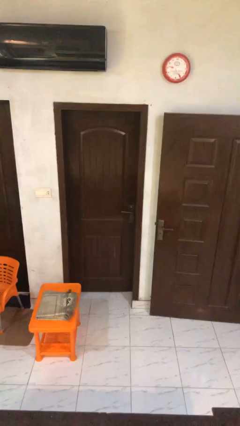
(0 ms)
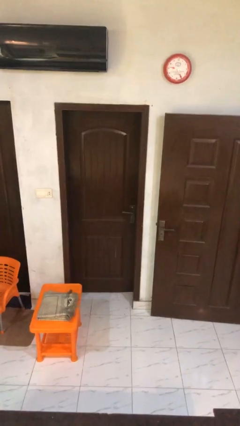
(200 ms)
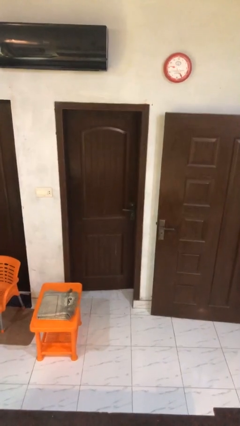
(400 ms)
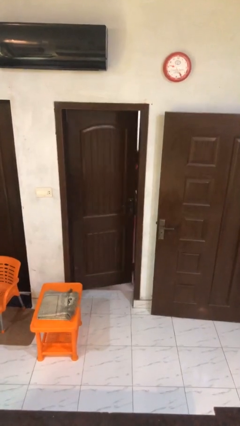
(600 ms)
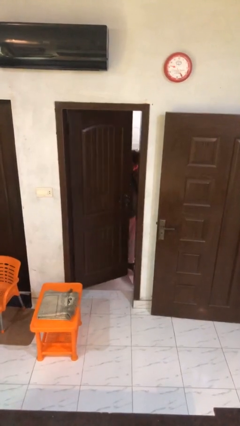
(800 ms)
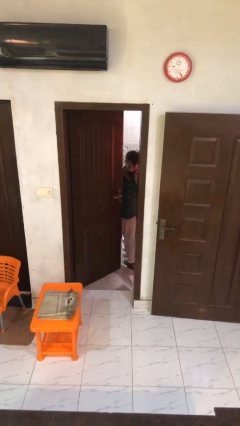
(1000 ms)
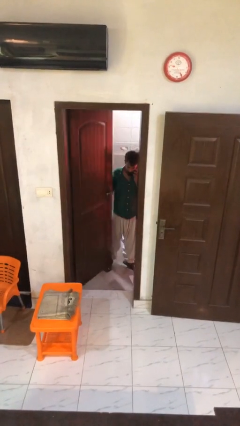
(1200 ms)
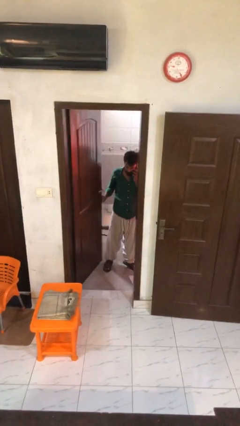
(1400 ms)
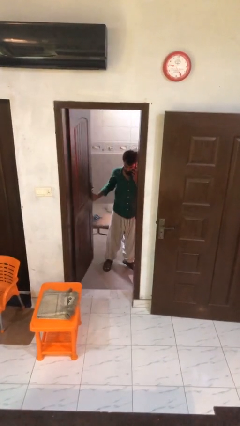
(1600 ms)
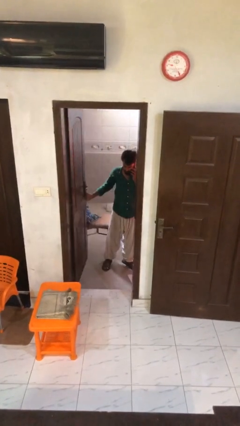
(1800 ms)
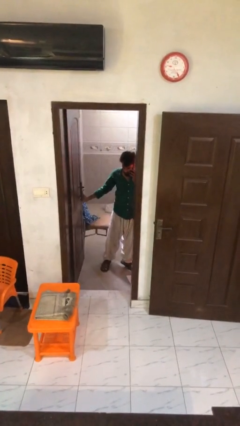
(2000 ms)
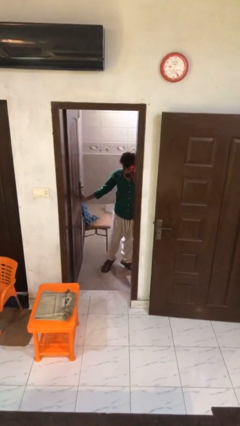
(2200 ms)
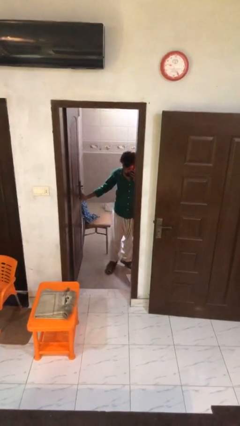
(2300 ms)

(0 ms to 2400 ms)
person opens facility door

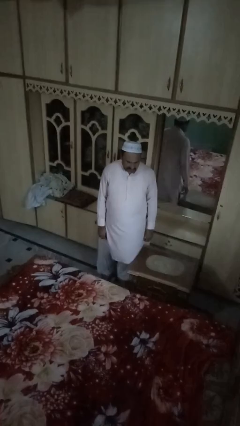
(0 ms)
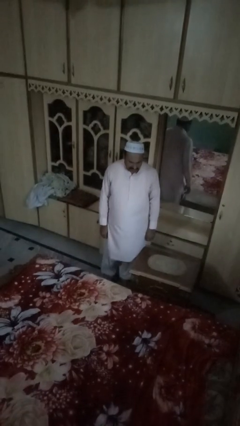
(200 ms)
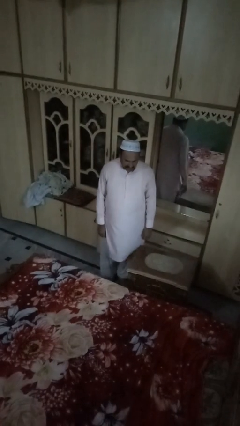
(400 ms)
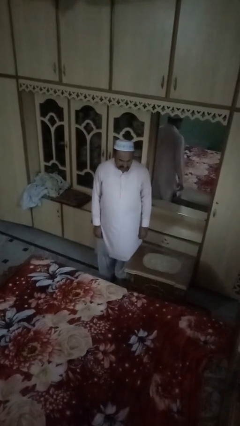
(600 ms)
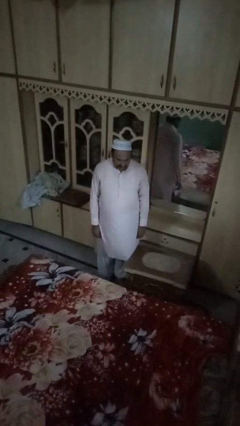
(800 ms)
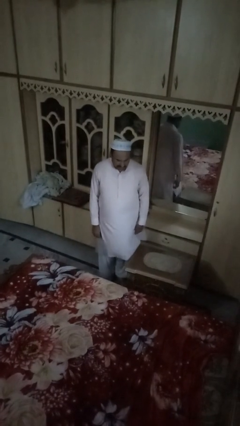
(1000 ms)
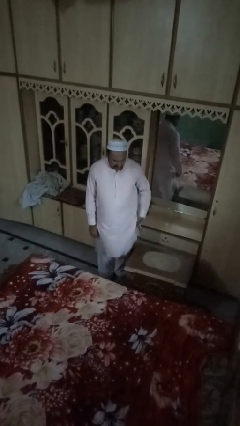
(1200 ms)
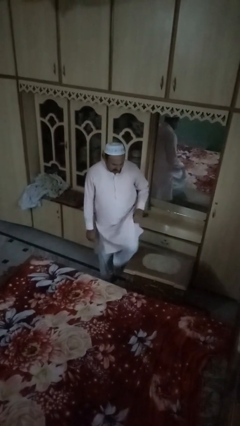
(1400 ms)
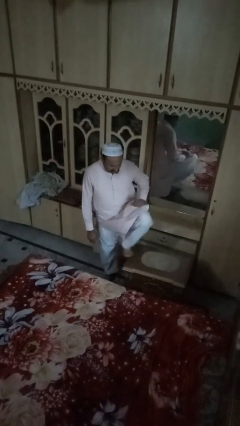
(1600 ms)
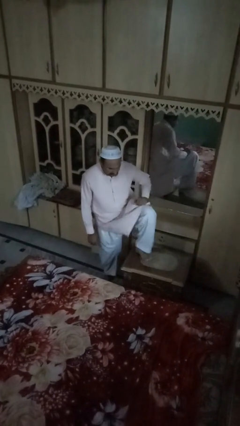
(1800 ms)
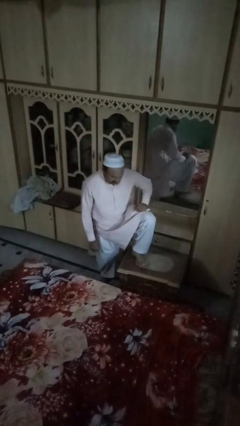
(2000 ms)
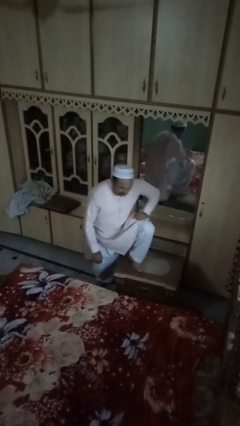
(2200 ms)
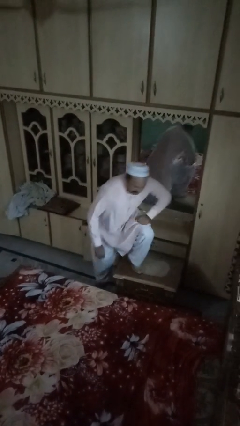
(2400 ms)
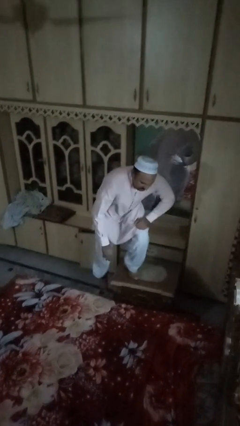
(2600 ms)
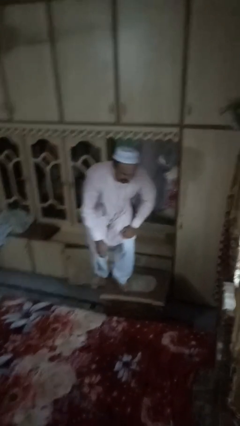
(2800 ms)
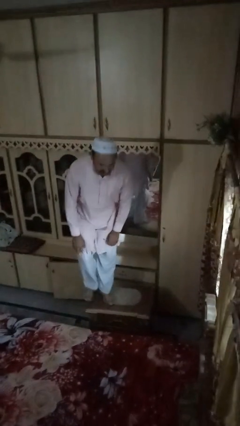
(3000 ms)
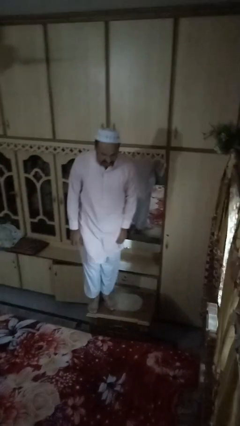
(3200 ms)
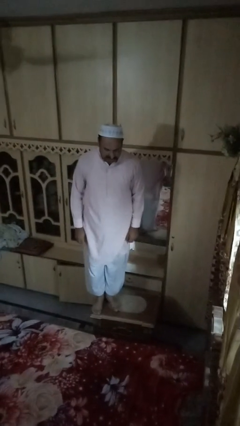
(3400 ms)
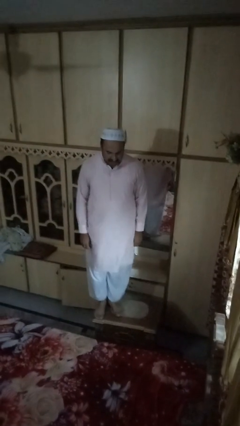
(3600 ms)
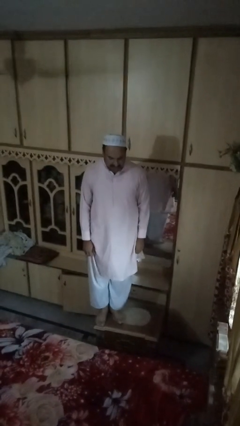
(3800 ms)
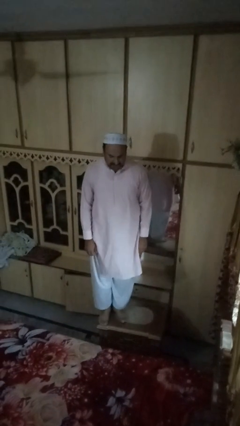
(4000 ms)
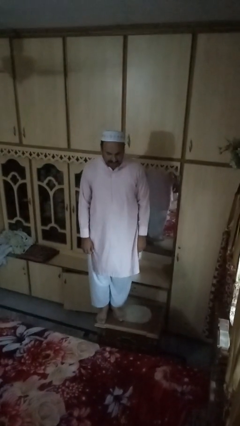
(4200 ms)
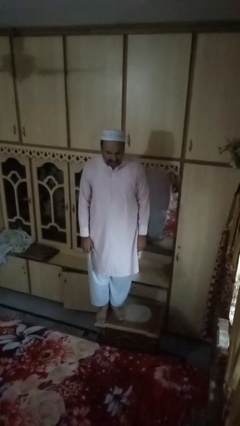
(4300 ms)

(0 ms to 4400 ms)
person climbs on table

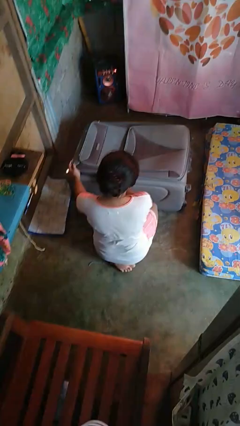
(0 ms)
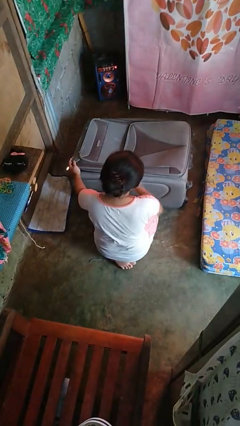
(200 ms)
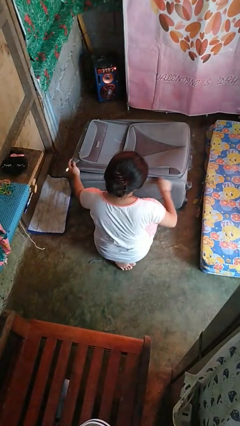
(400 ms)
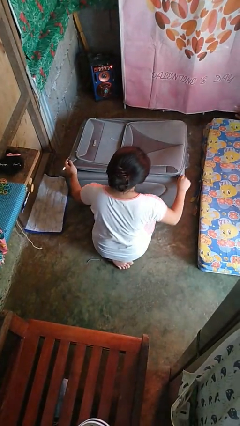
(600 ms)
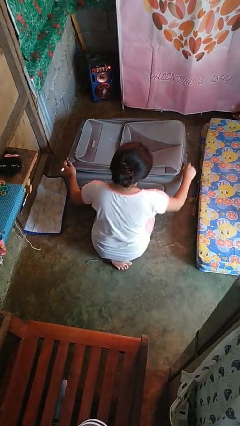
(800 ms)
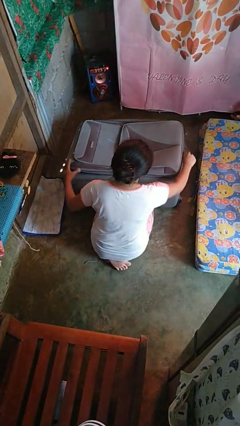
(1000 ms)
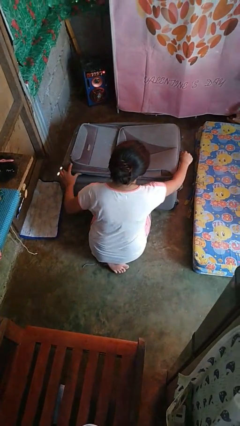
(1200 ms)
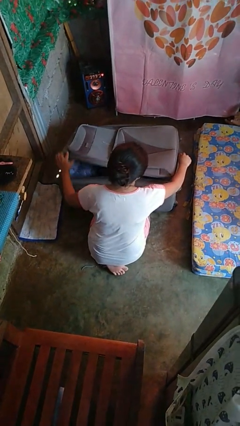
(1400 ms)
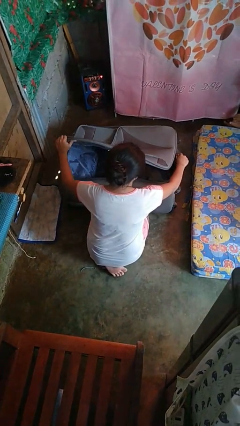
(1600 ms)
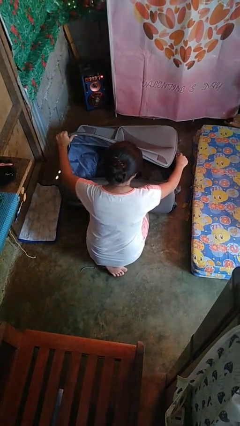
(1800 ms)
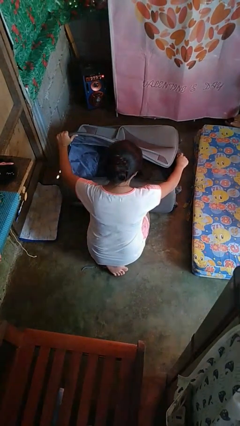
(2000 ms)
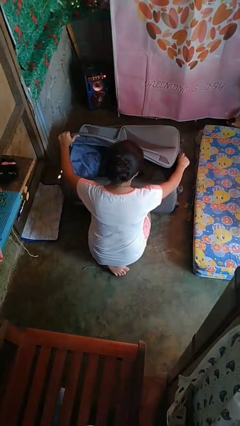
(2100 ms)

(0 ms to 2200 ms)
person opens suitcase

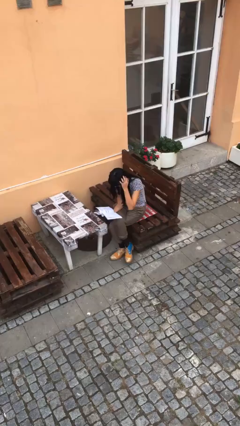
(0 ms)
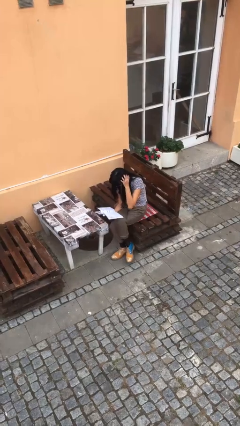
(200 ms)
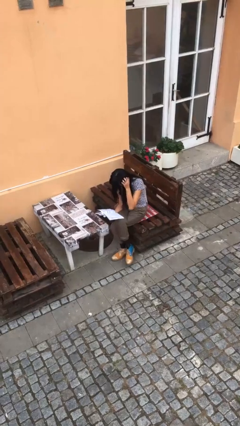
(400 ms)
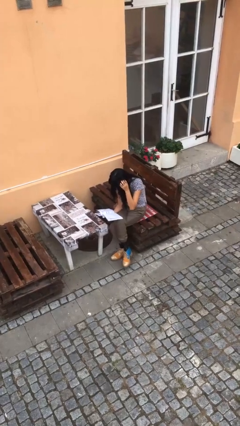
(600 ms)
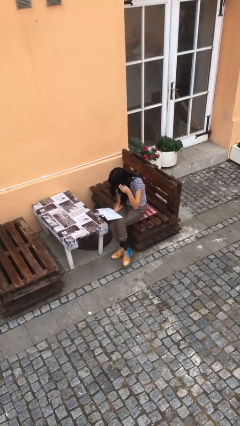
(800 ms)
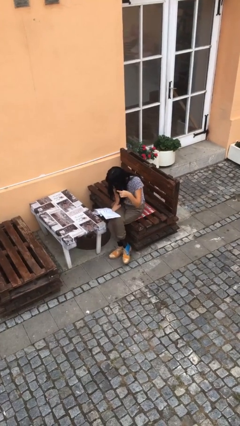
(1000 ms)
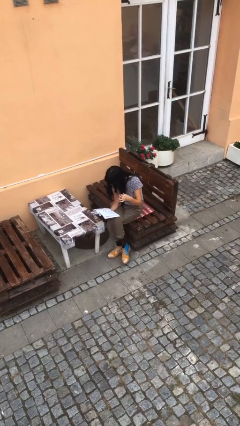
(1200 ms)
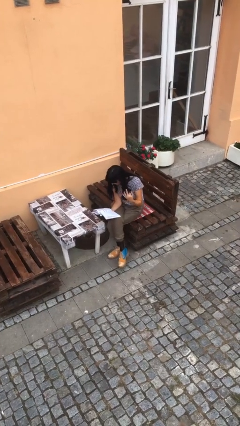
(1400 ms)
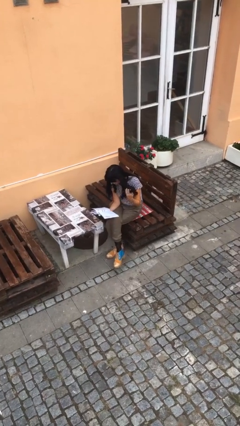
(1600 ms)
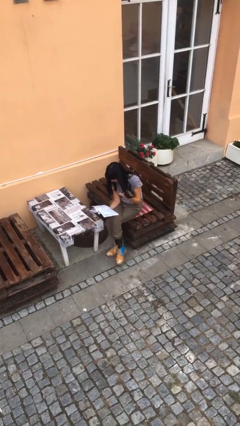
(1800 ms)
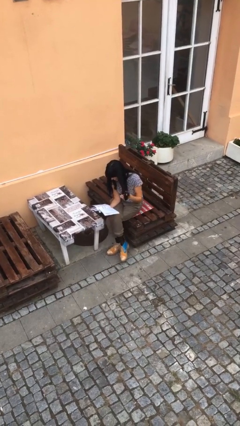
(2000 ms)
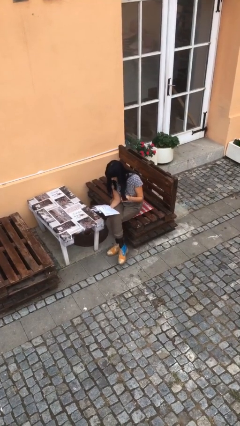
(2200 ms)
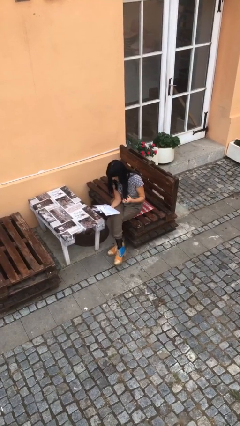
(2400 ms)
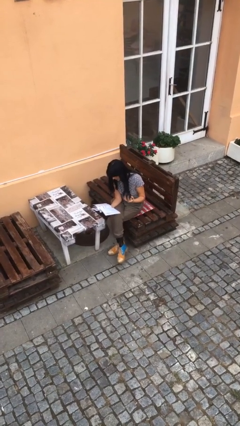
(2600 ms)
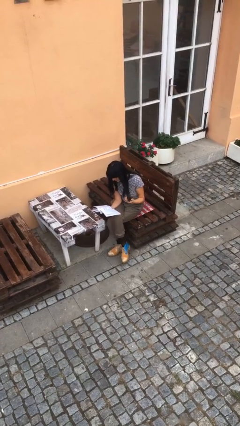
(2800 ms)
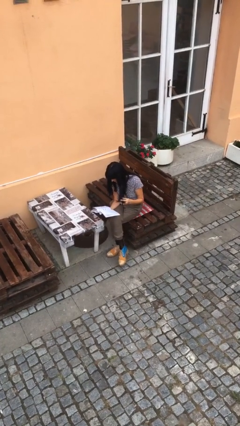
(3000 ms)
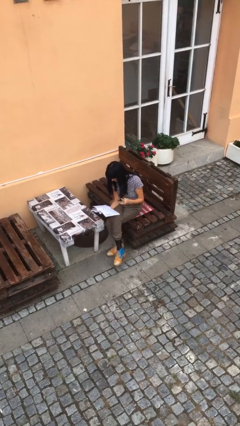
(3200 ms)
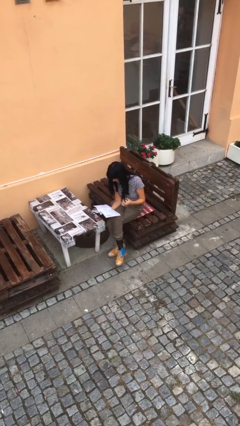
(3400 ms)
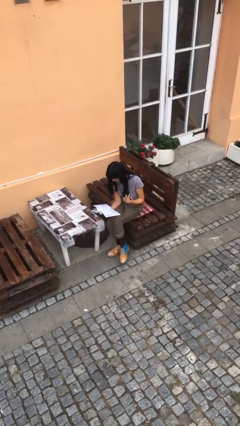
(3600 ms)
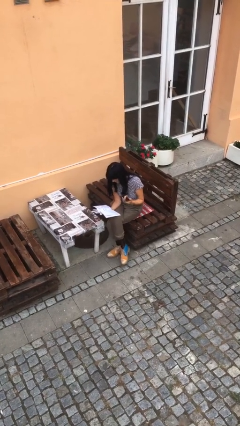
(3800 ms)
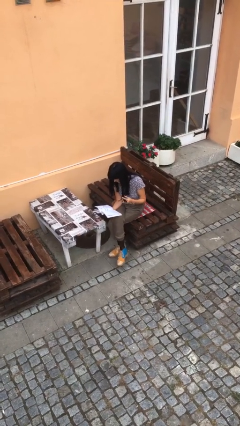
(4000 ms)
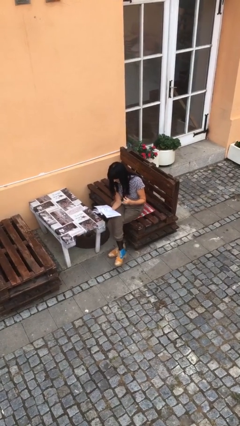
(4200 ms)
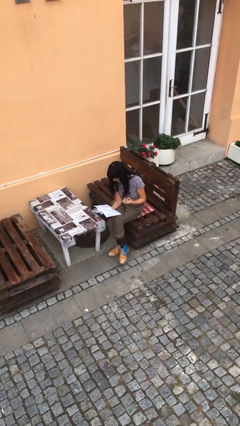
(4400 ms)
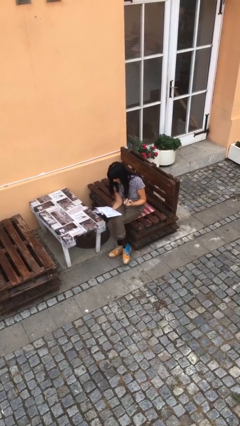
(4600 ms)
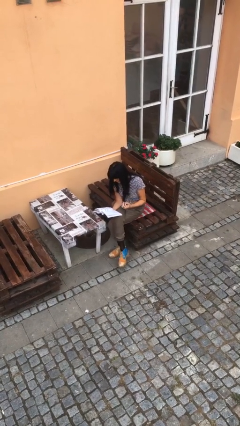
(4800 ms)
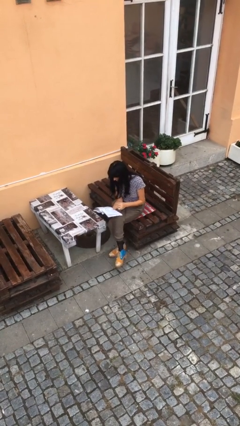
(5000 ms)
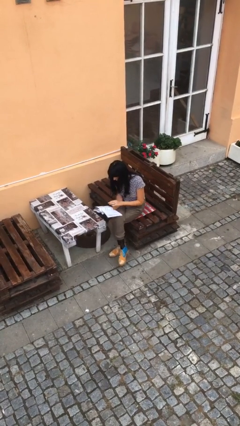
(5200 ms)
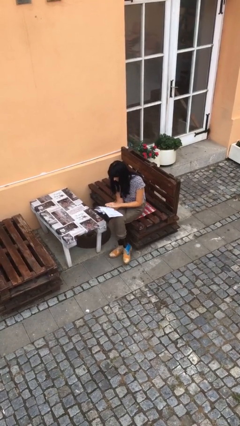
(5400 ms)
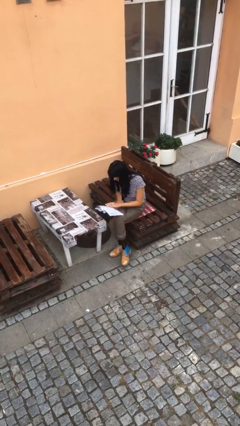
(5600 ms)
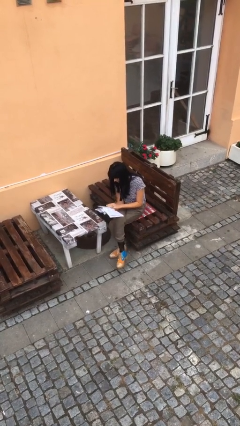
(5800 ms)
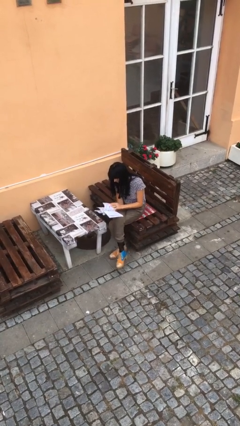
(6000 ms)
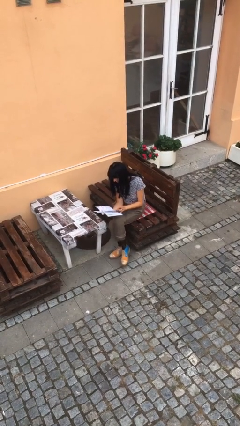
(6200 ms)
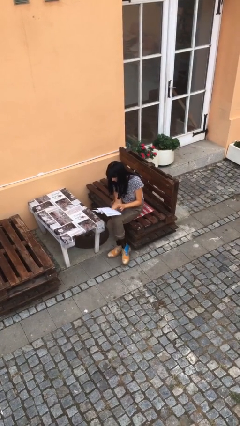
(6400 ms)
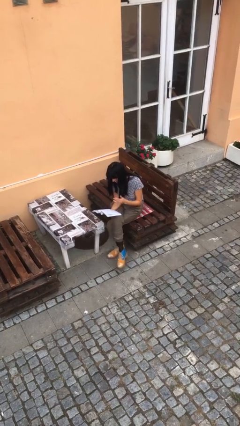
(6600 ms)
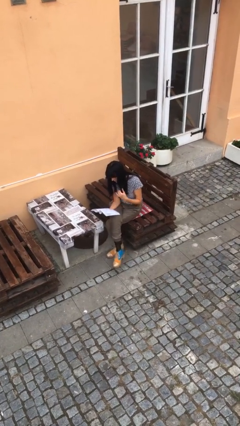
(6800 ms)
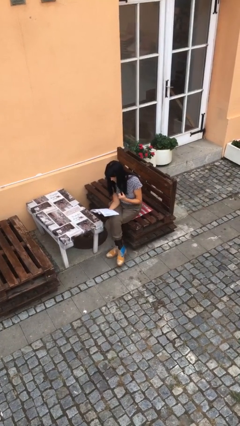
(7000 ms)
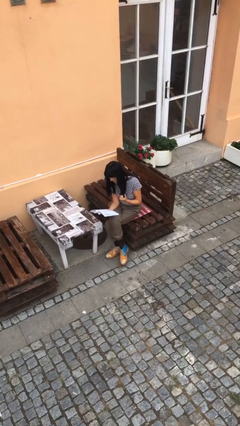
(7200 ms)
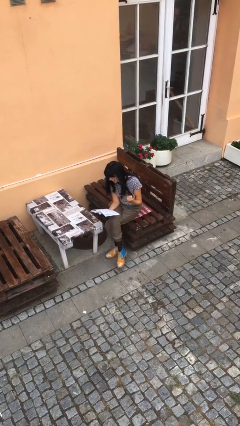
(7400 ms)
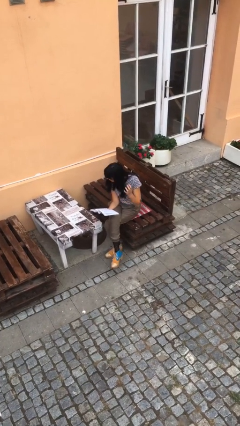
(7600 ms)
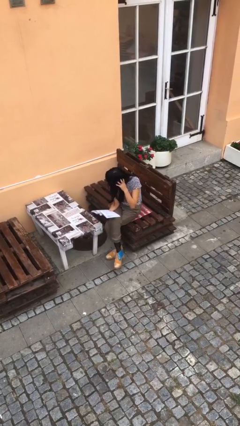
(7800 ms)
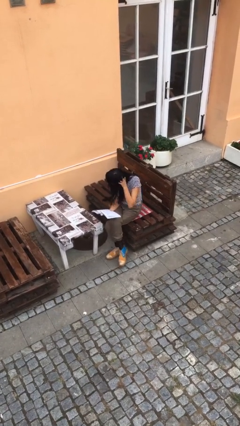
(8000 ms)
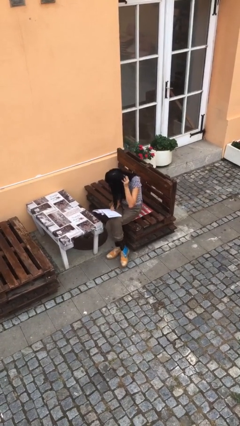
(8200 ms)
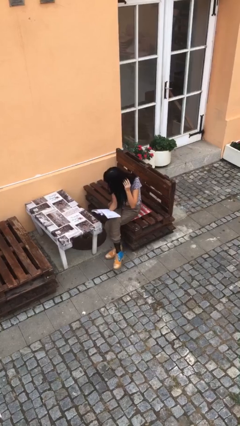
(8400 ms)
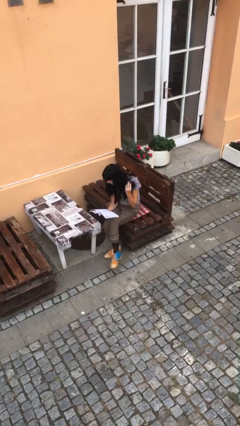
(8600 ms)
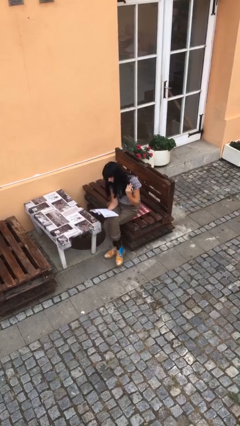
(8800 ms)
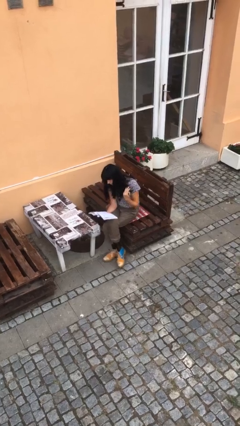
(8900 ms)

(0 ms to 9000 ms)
person reads document
